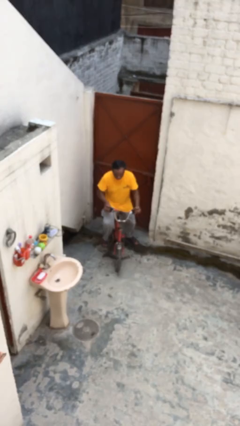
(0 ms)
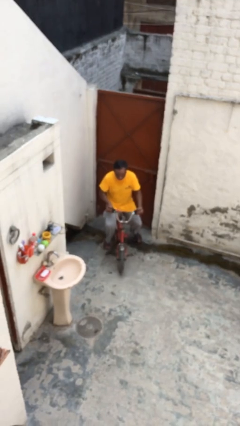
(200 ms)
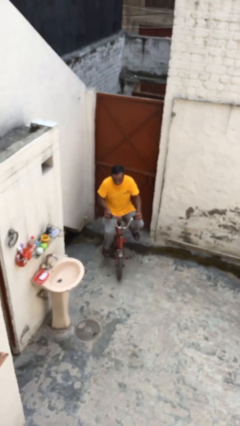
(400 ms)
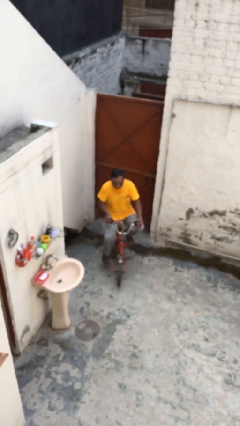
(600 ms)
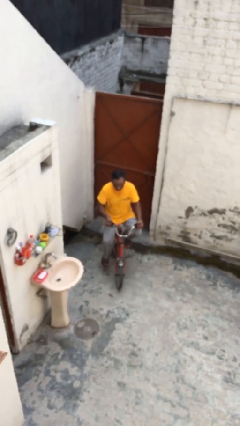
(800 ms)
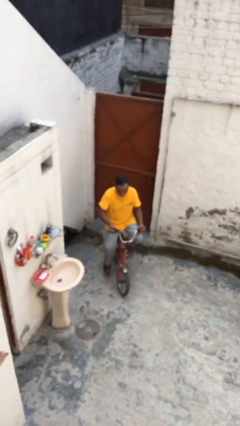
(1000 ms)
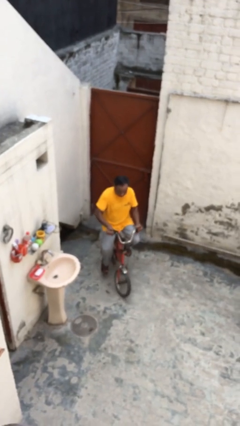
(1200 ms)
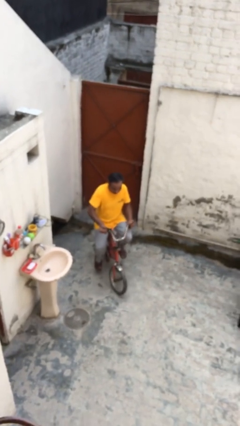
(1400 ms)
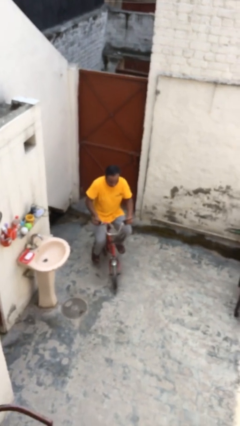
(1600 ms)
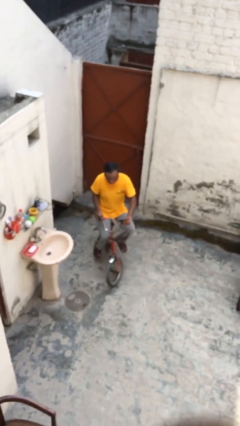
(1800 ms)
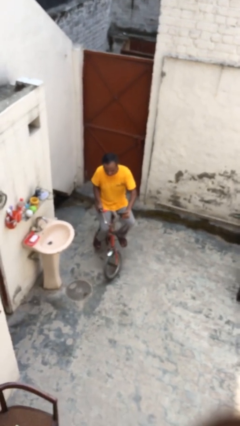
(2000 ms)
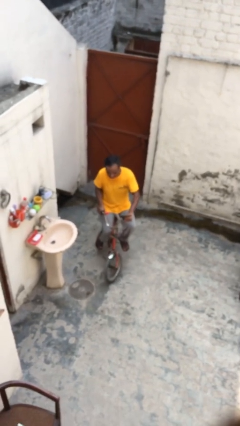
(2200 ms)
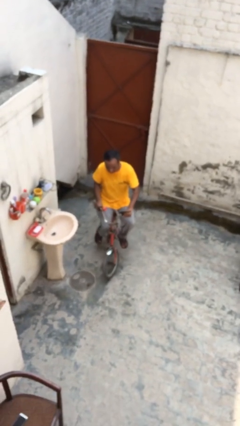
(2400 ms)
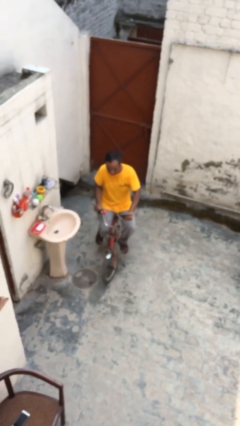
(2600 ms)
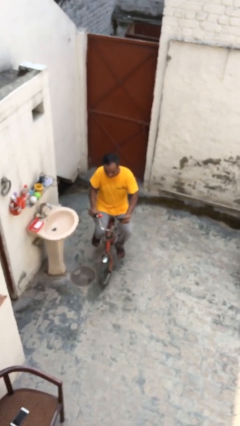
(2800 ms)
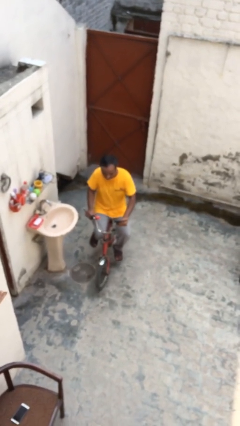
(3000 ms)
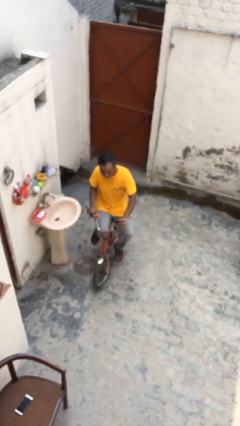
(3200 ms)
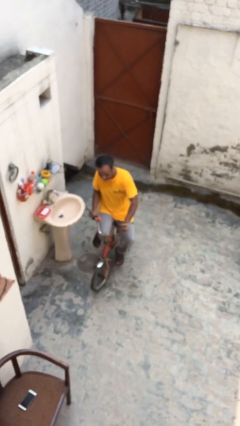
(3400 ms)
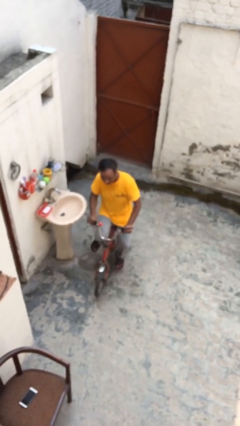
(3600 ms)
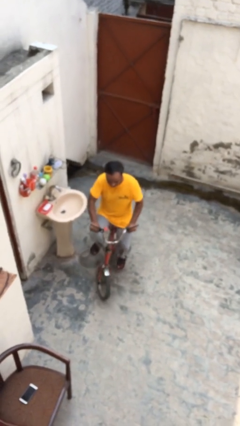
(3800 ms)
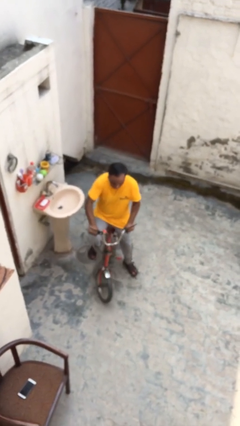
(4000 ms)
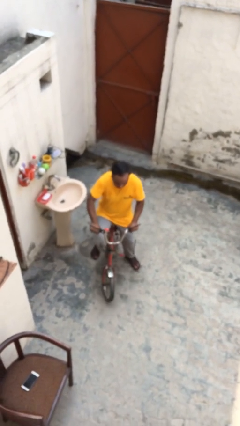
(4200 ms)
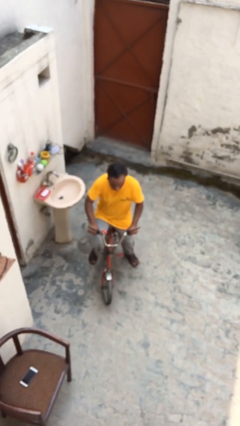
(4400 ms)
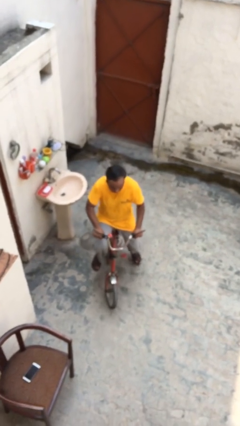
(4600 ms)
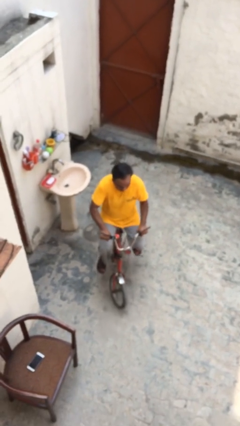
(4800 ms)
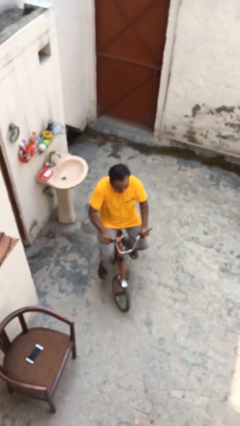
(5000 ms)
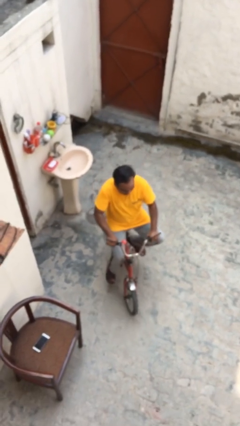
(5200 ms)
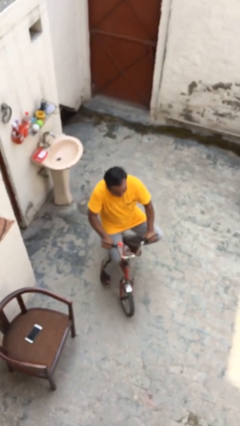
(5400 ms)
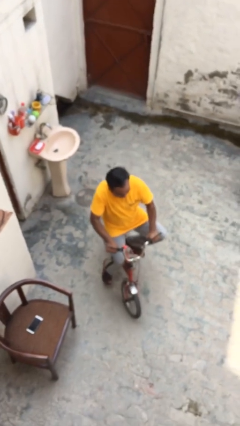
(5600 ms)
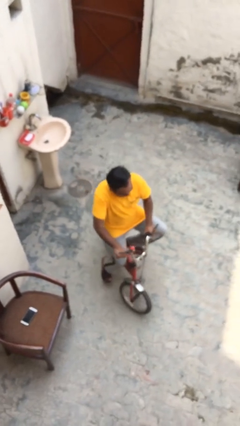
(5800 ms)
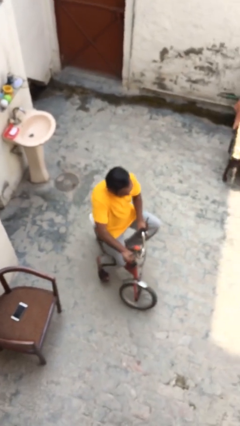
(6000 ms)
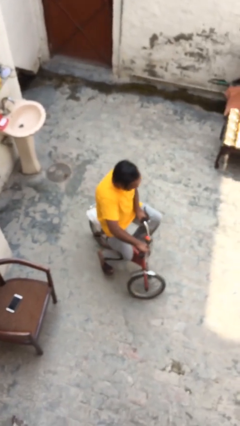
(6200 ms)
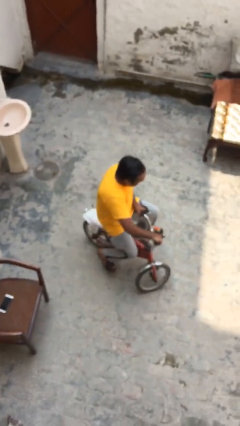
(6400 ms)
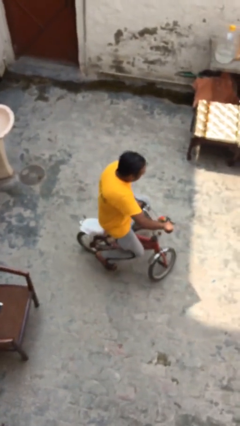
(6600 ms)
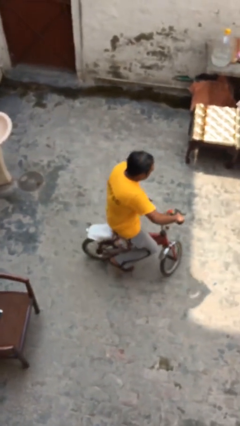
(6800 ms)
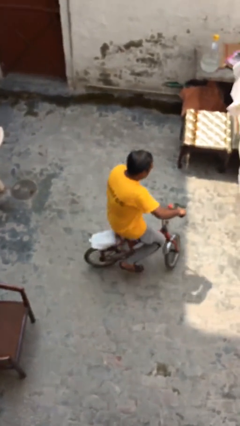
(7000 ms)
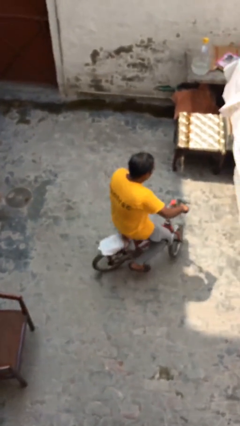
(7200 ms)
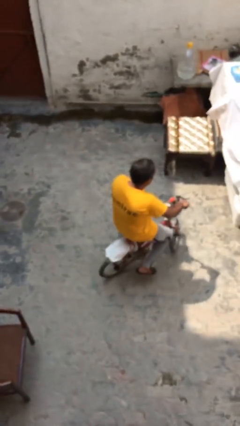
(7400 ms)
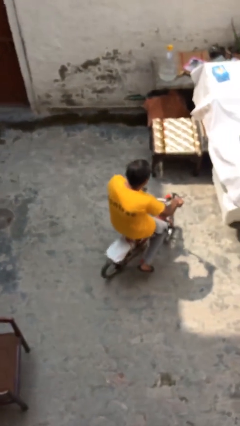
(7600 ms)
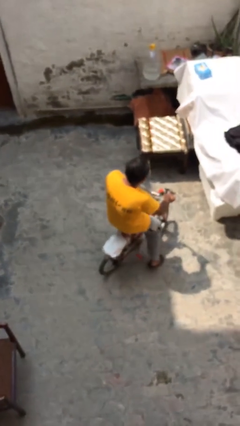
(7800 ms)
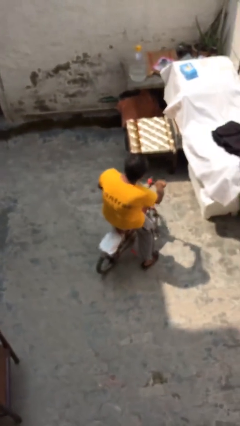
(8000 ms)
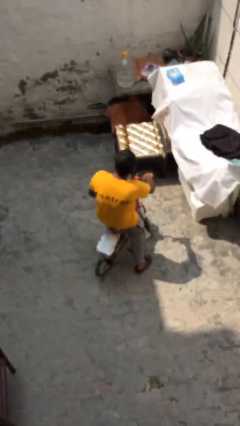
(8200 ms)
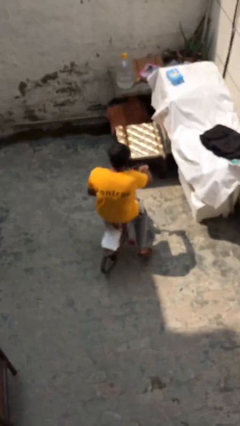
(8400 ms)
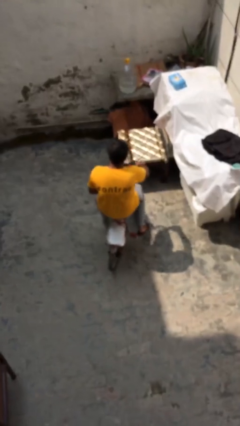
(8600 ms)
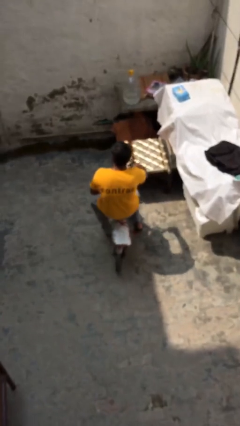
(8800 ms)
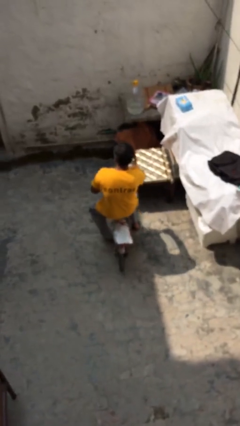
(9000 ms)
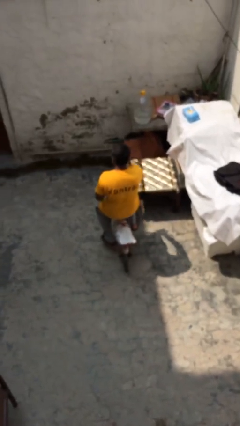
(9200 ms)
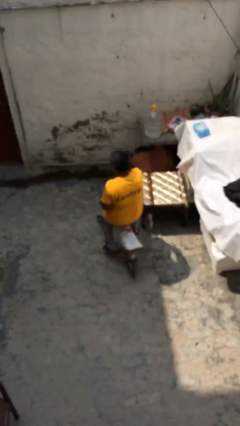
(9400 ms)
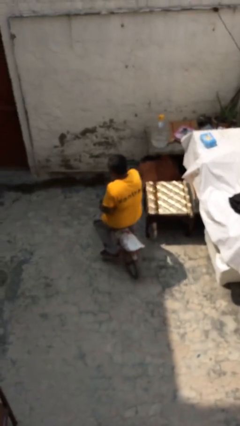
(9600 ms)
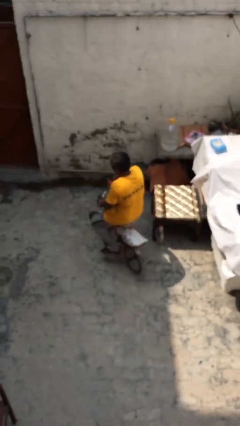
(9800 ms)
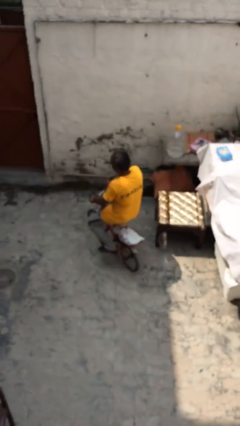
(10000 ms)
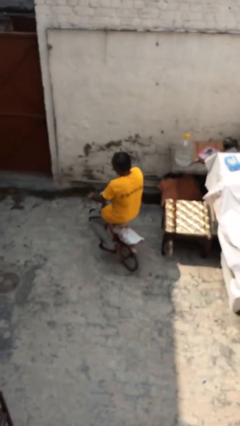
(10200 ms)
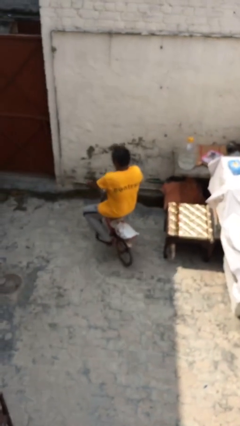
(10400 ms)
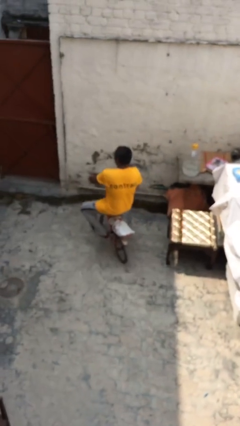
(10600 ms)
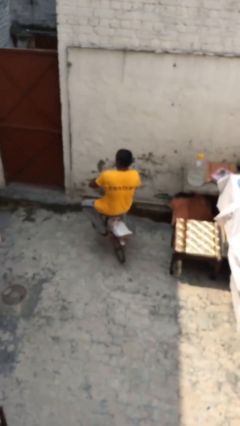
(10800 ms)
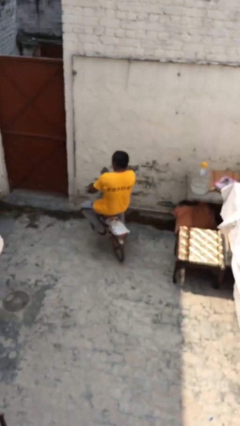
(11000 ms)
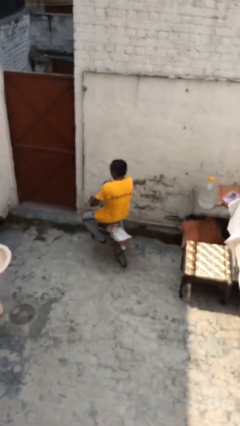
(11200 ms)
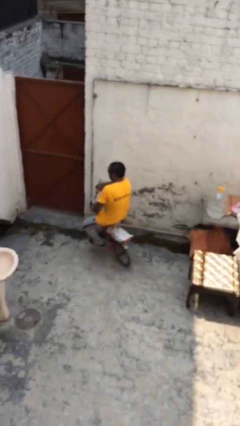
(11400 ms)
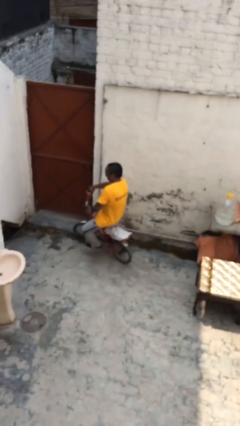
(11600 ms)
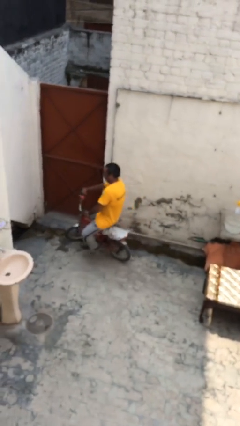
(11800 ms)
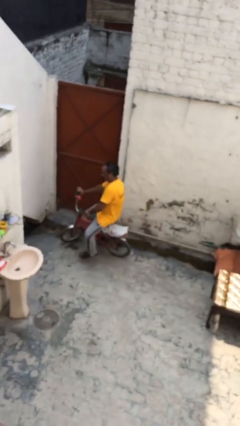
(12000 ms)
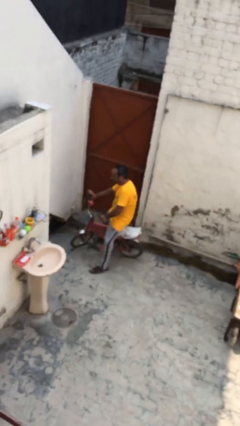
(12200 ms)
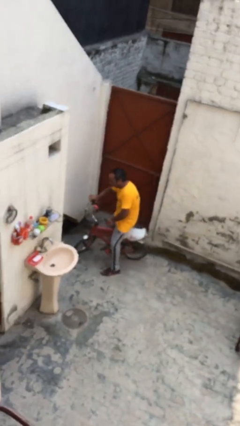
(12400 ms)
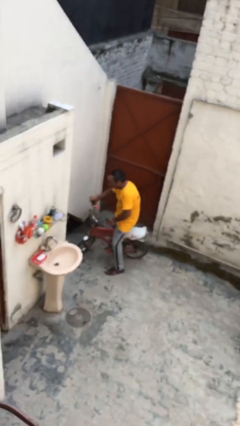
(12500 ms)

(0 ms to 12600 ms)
person rides bicycle

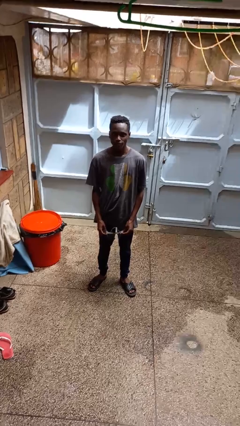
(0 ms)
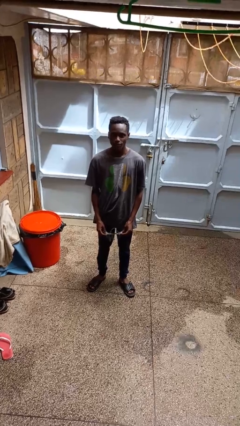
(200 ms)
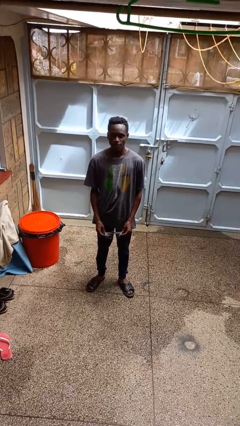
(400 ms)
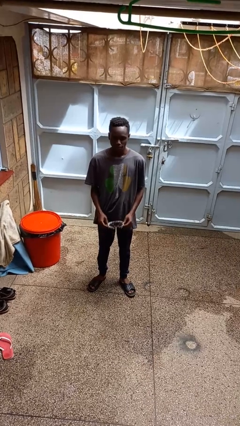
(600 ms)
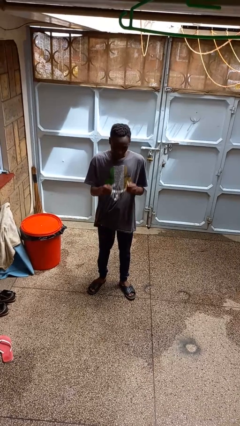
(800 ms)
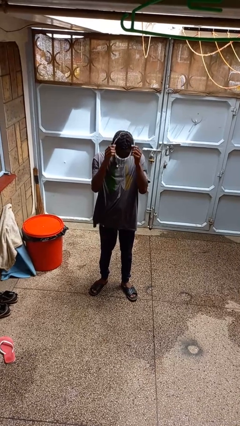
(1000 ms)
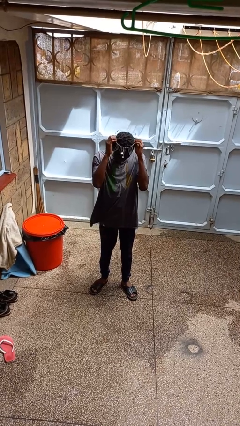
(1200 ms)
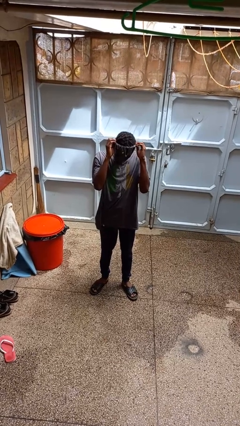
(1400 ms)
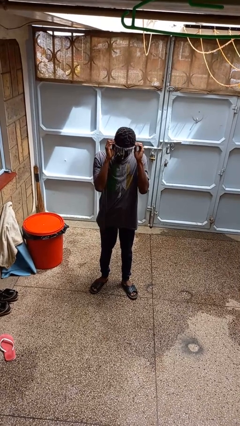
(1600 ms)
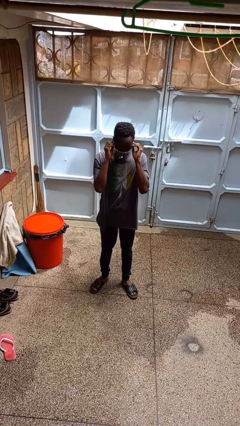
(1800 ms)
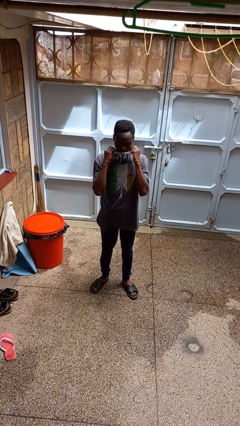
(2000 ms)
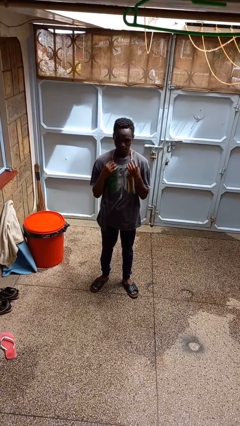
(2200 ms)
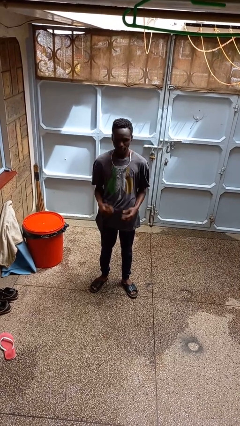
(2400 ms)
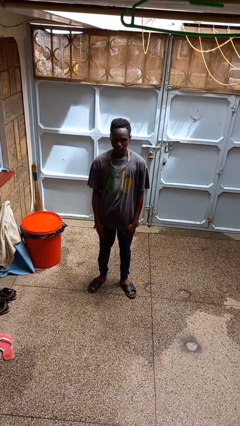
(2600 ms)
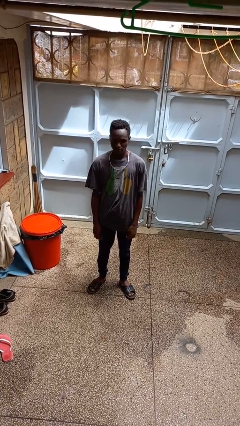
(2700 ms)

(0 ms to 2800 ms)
person puts on necklace

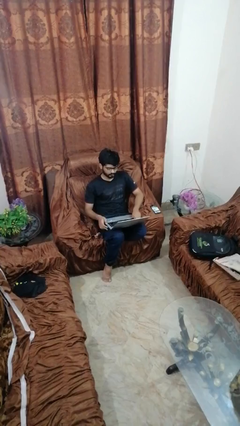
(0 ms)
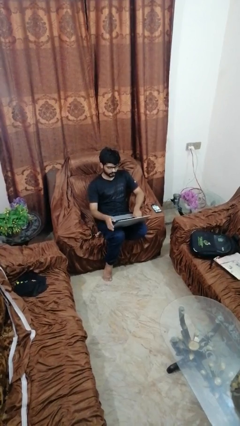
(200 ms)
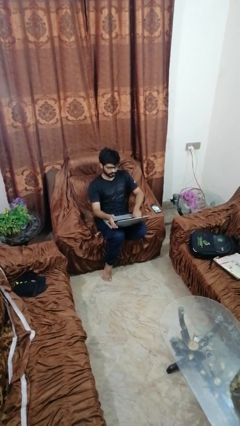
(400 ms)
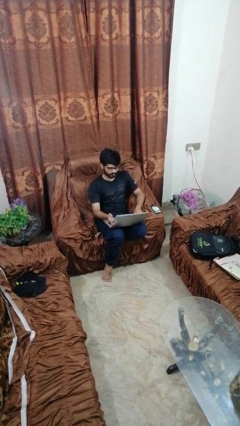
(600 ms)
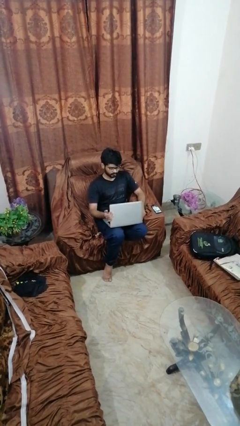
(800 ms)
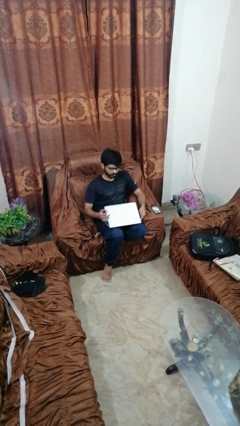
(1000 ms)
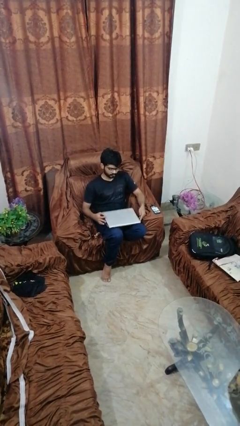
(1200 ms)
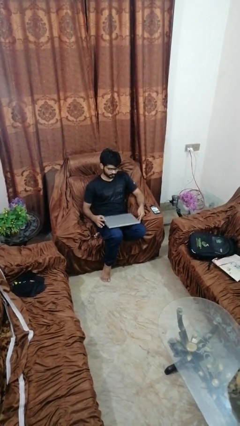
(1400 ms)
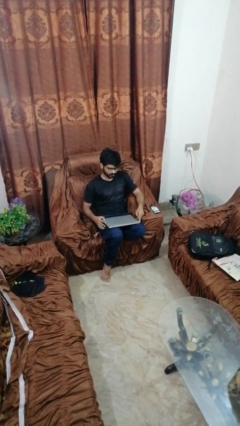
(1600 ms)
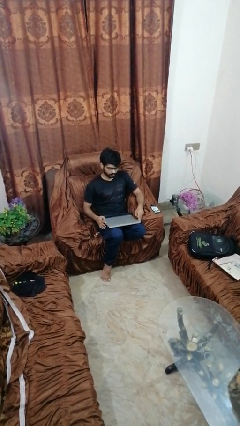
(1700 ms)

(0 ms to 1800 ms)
person closes laptop

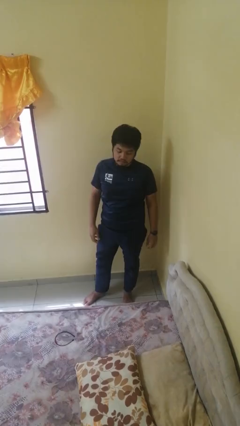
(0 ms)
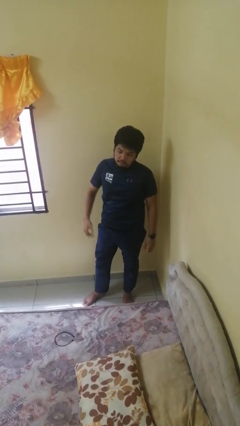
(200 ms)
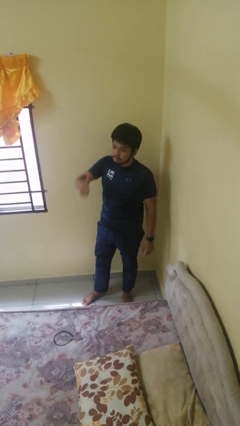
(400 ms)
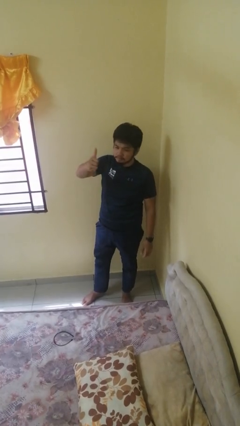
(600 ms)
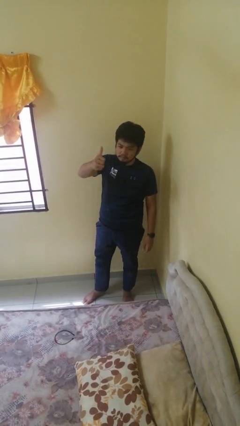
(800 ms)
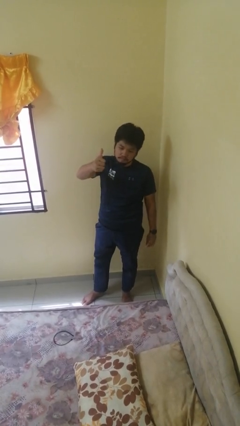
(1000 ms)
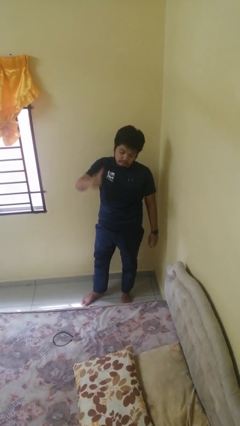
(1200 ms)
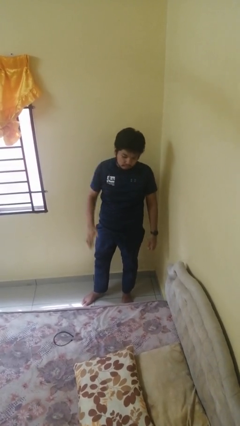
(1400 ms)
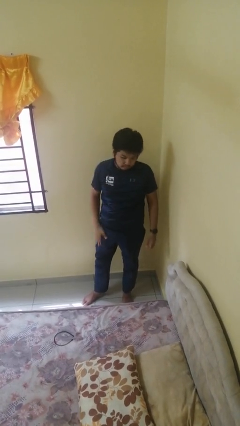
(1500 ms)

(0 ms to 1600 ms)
person gestures thumbs up
